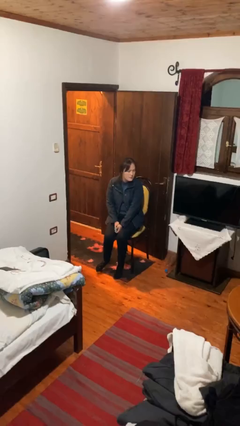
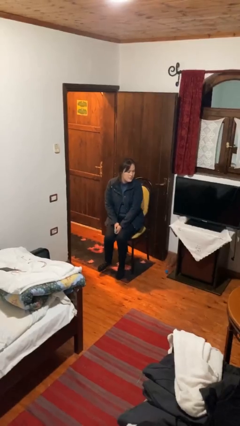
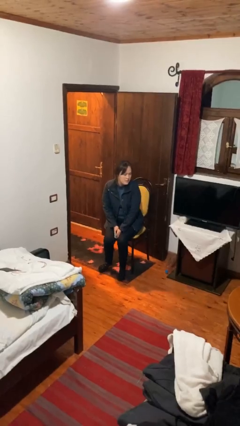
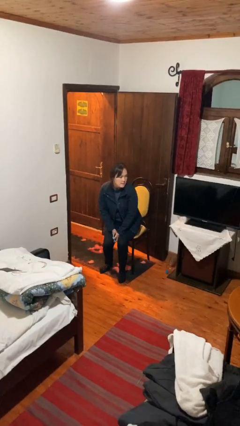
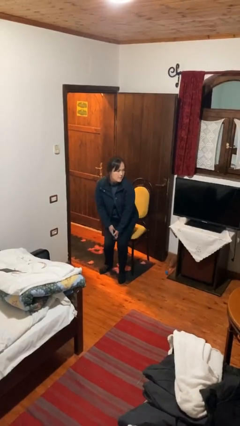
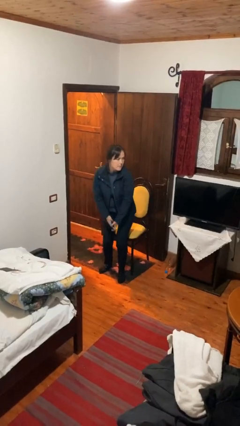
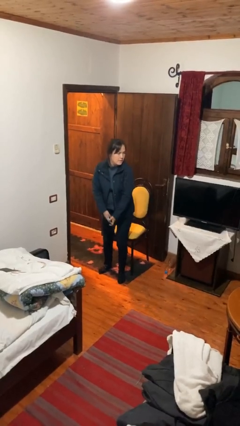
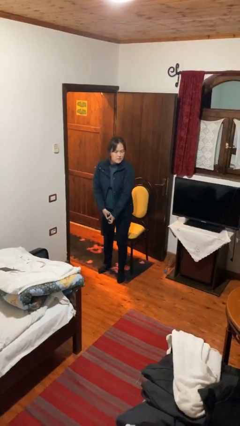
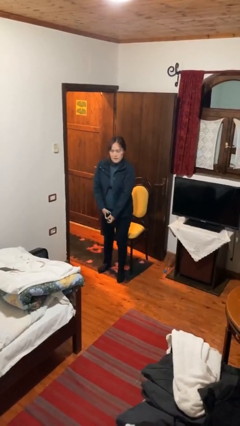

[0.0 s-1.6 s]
person stands up

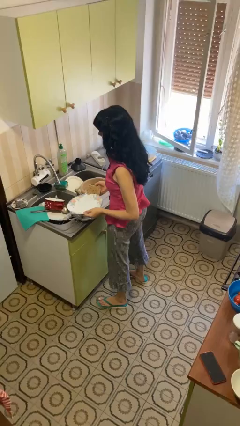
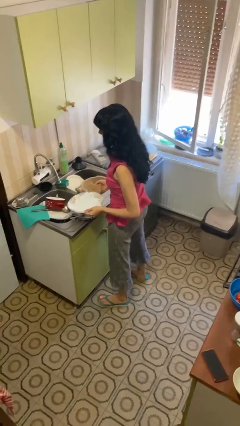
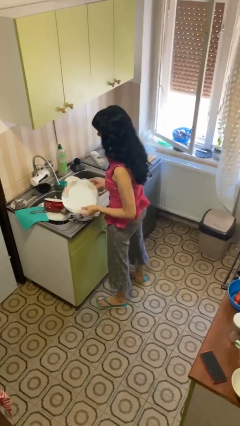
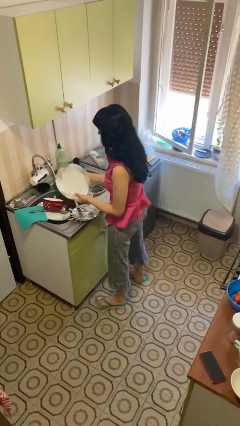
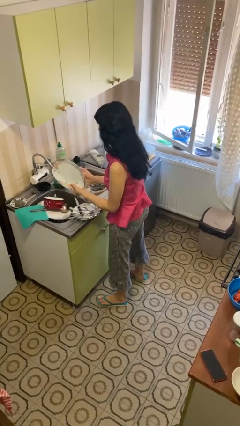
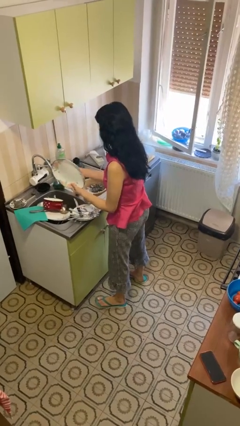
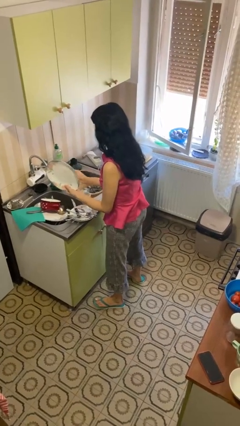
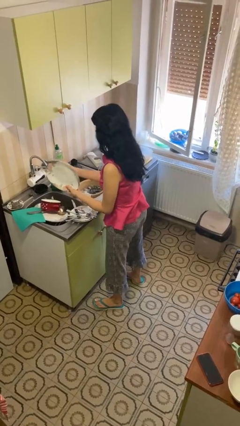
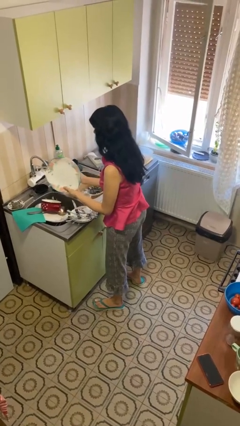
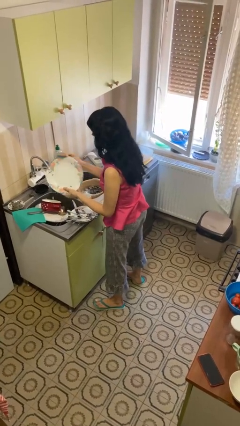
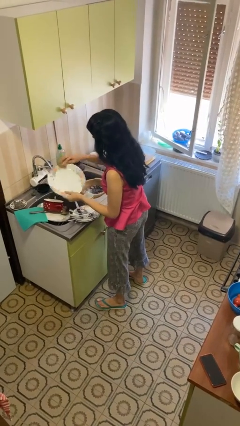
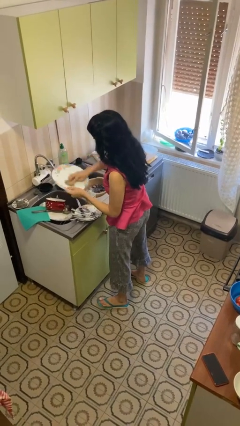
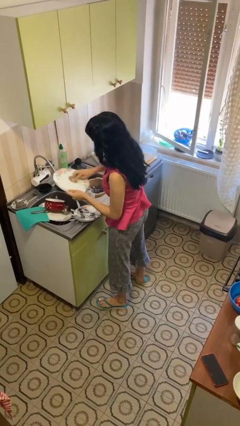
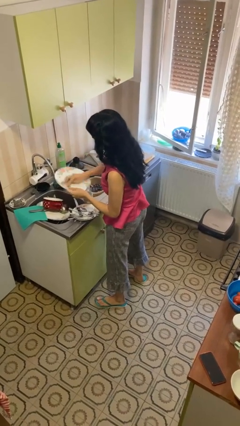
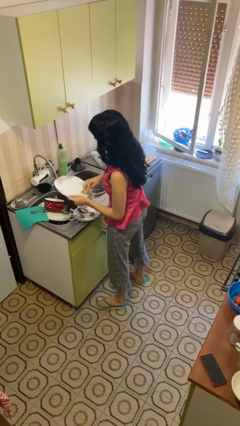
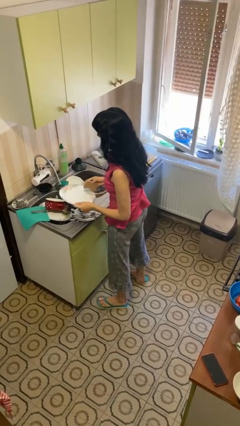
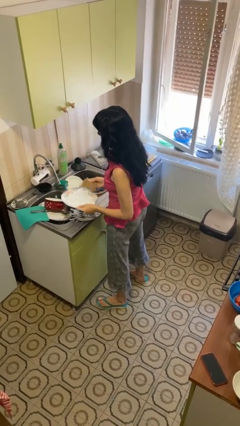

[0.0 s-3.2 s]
person washes dish

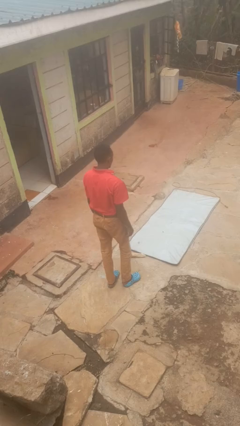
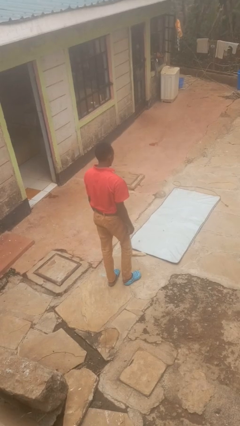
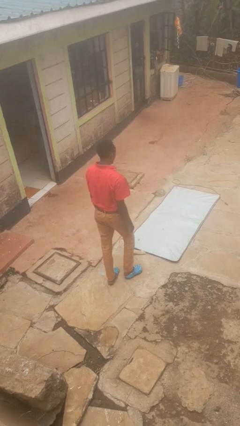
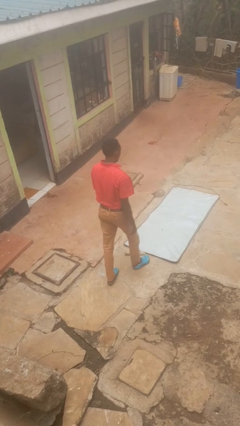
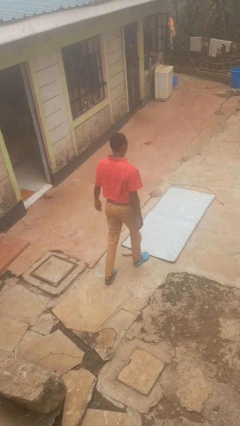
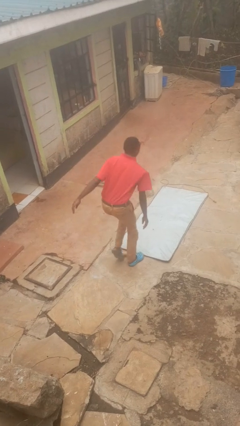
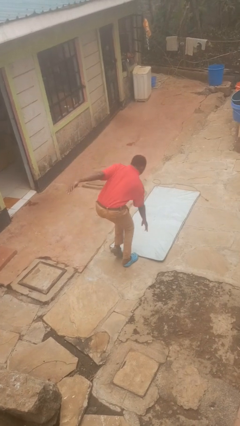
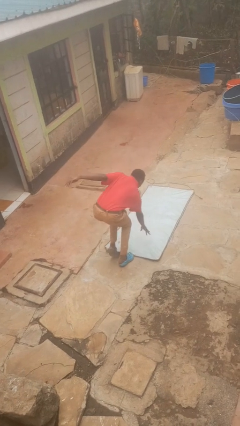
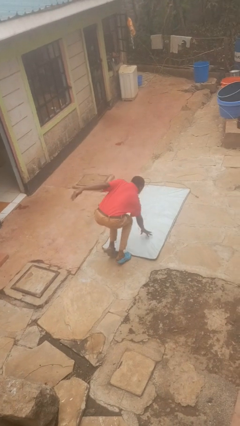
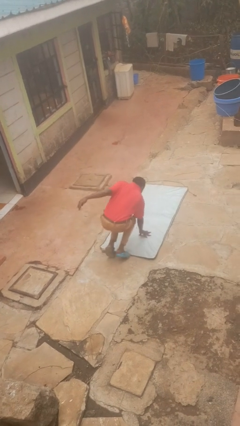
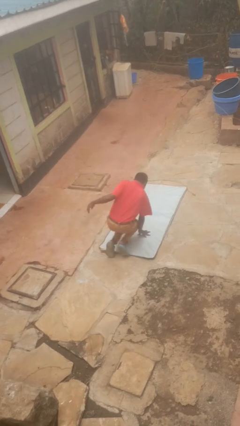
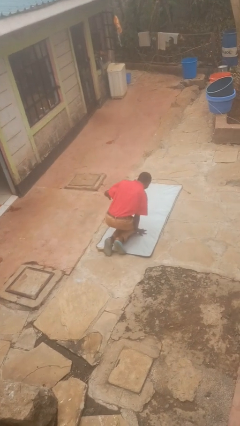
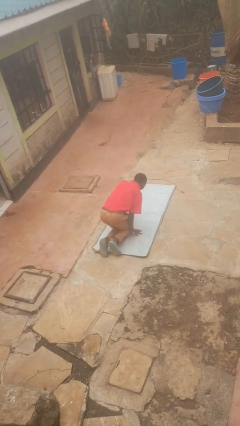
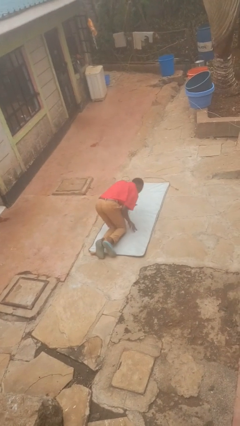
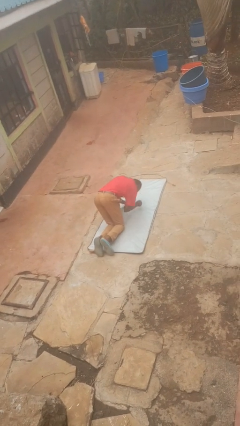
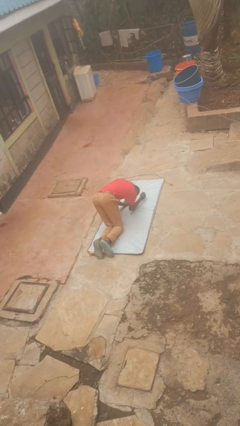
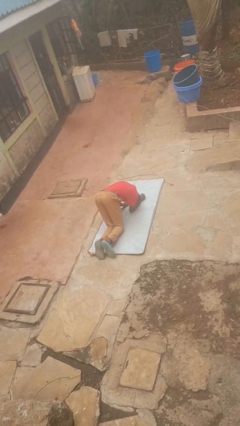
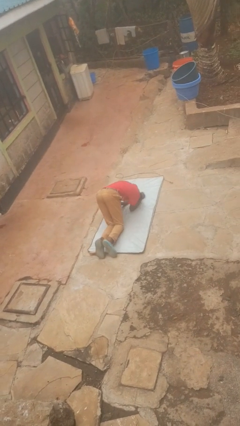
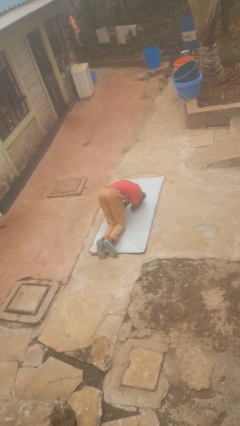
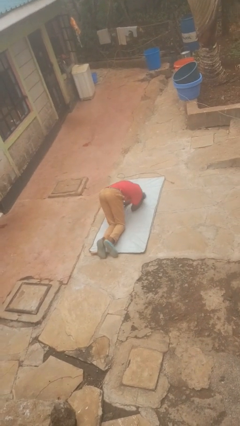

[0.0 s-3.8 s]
person trips on object on floor

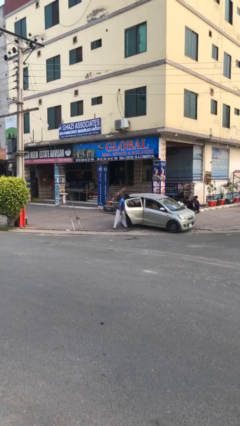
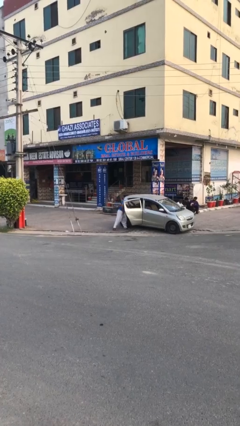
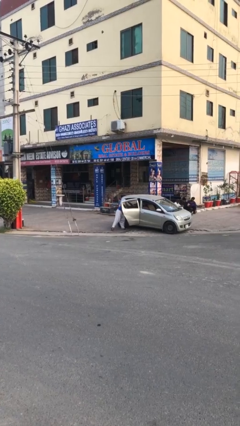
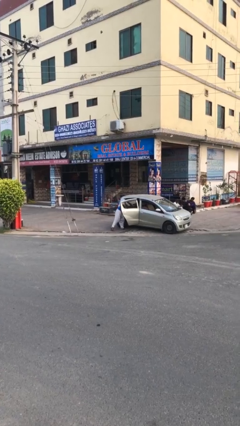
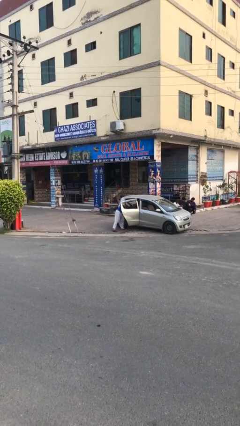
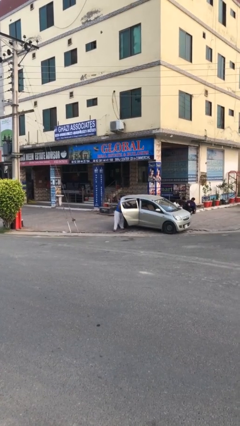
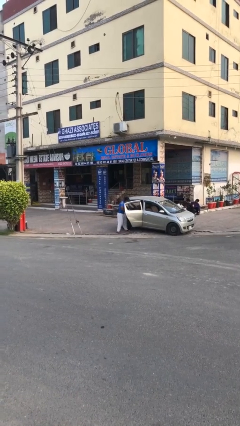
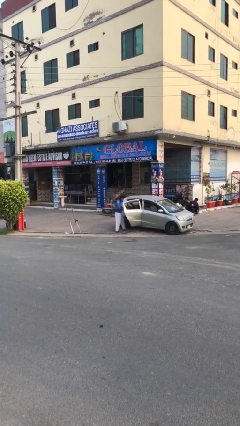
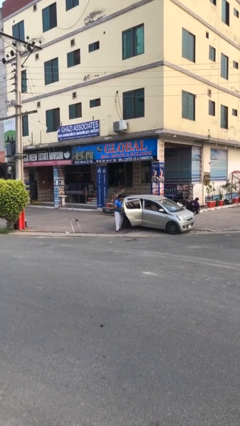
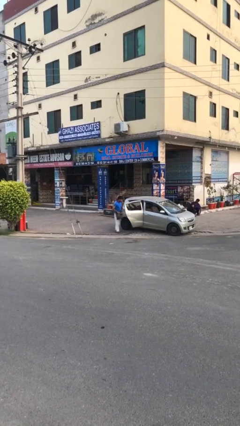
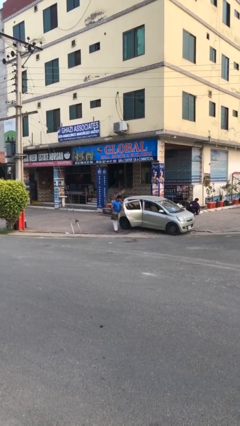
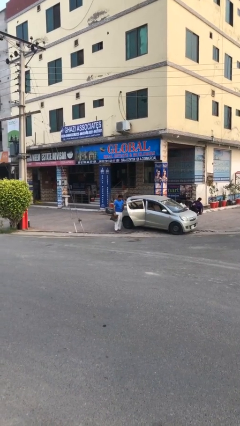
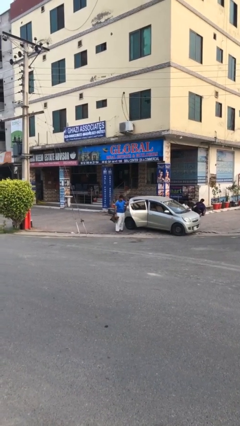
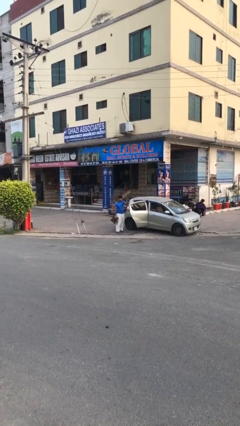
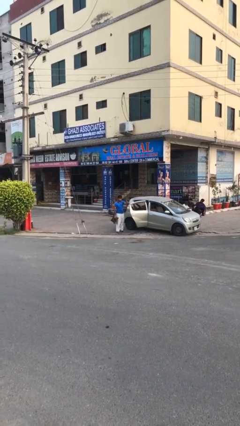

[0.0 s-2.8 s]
person unloads car

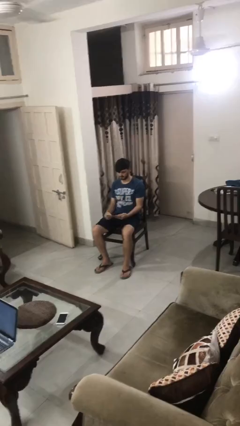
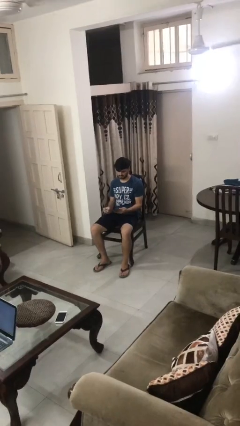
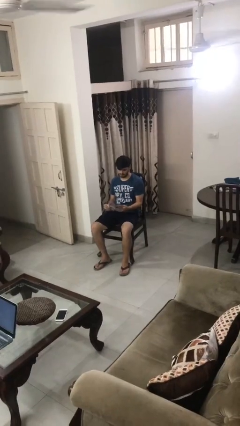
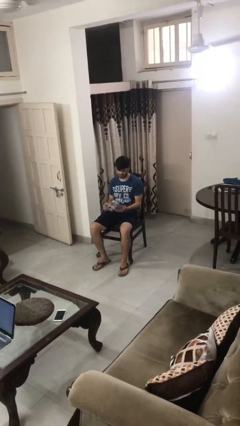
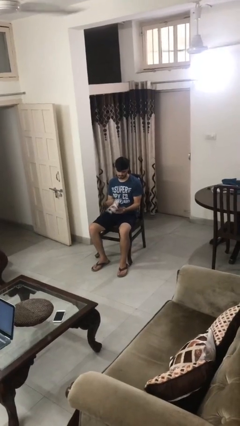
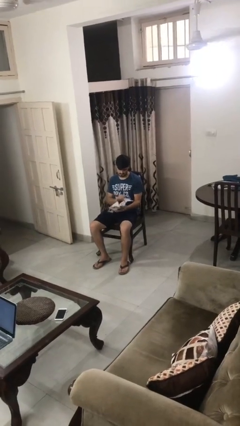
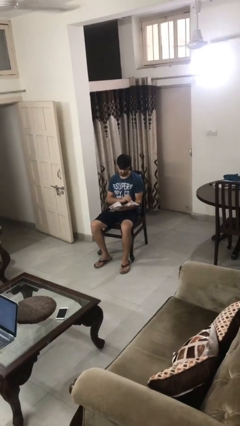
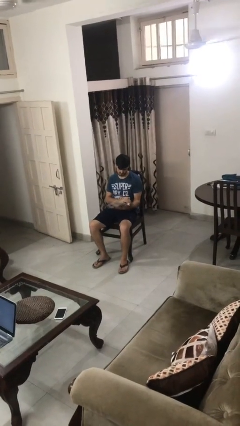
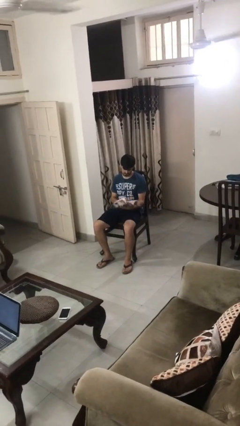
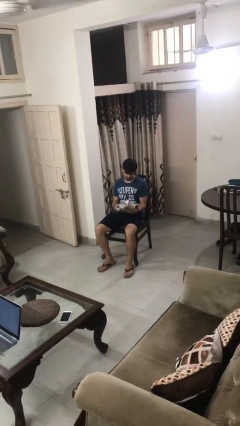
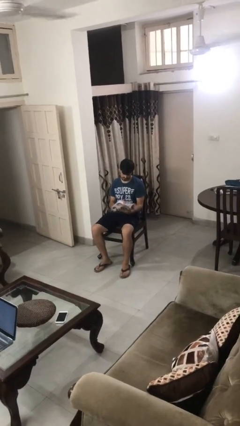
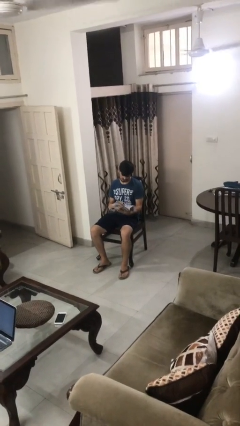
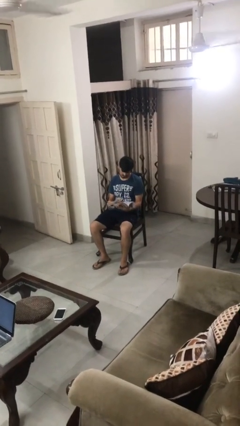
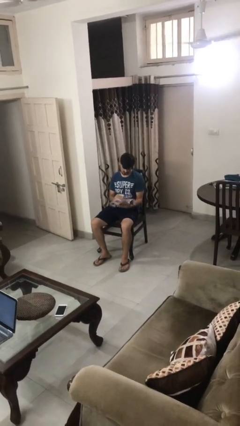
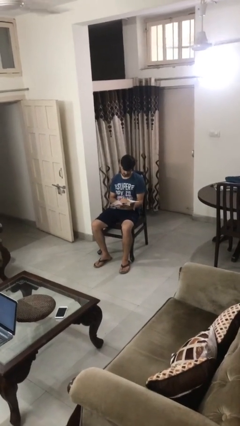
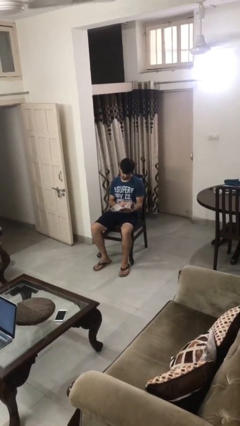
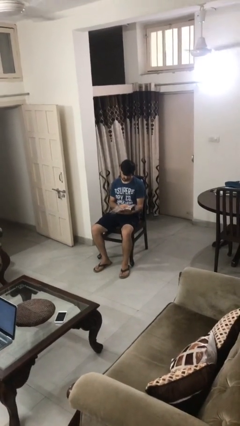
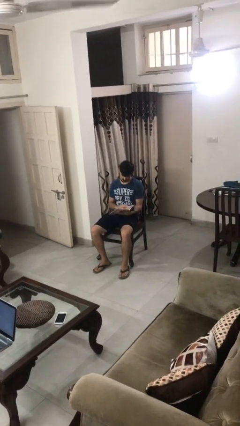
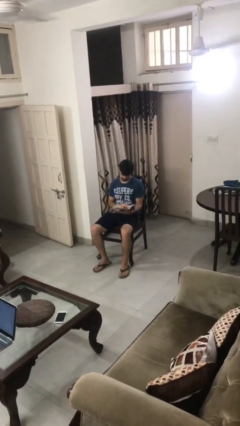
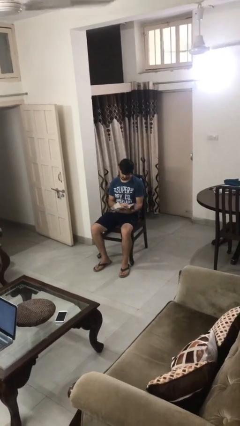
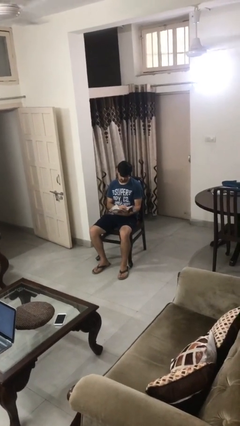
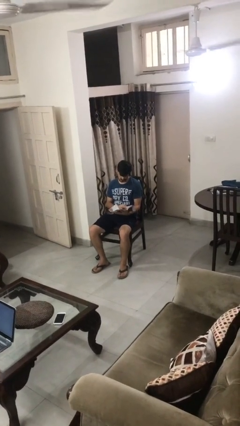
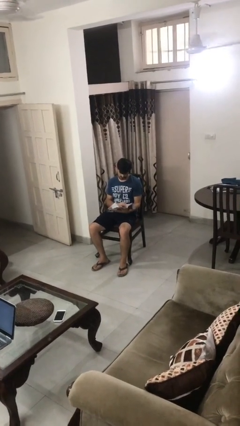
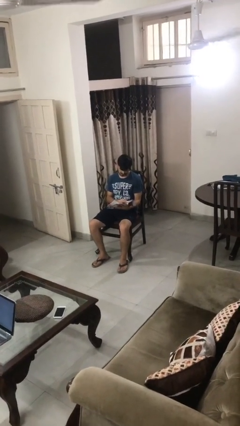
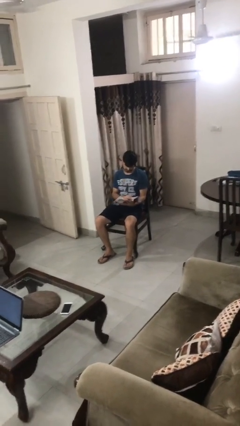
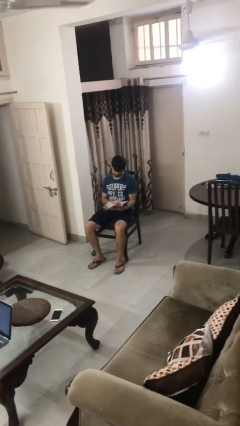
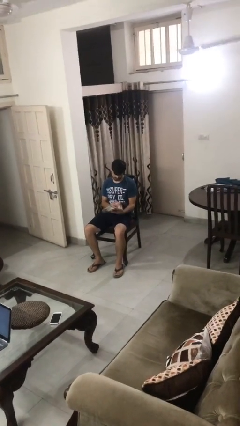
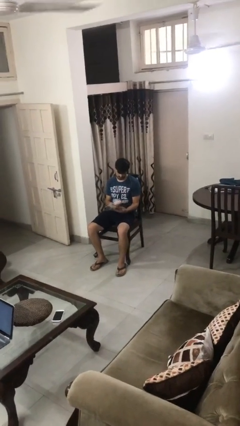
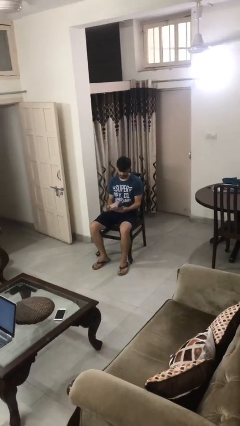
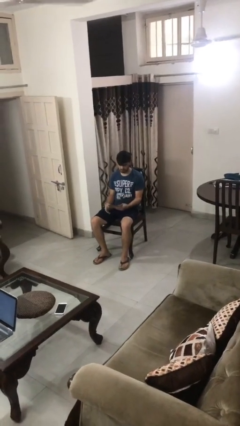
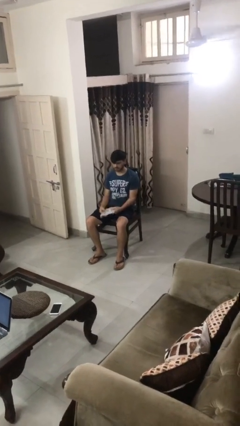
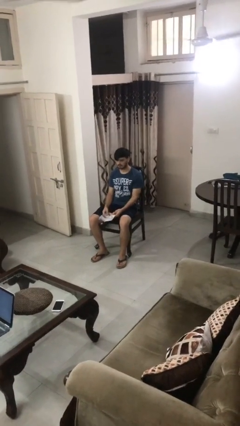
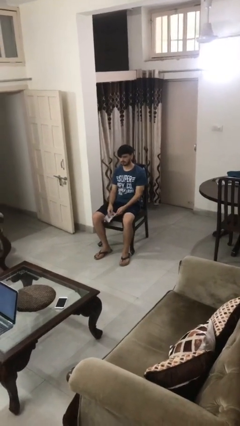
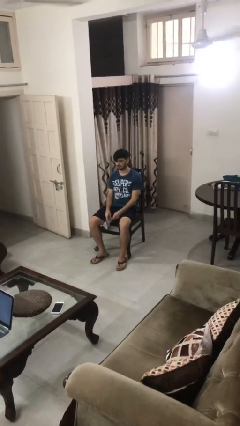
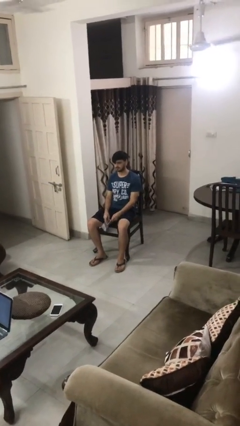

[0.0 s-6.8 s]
person reads magazine
